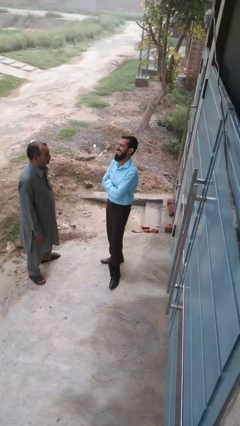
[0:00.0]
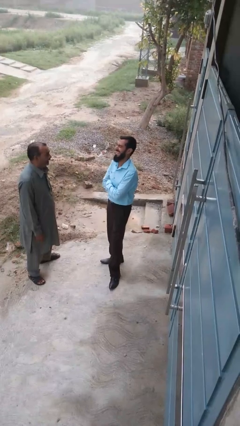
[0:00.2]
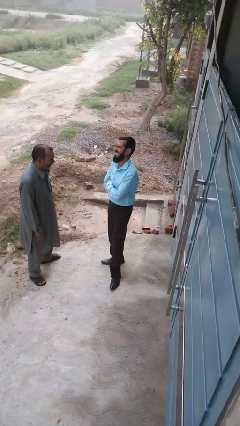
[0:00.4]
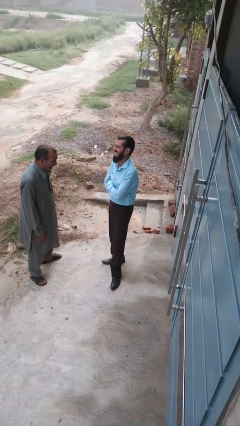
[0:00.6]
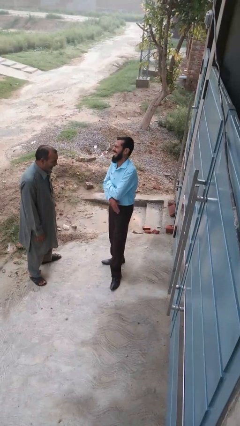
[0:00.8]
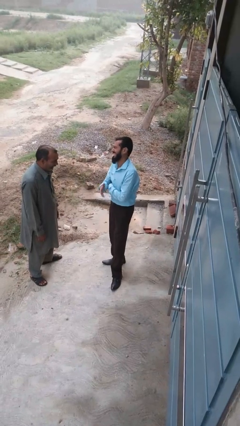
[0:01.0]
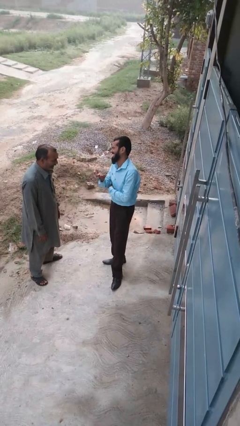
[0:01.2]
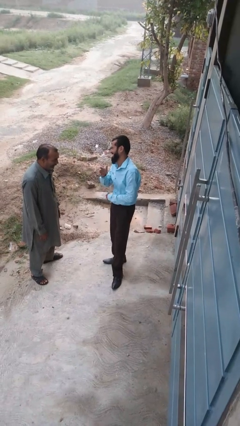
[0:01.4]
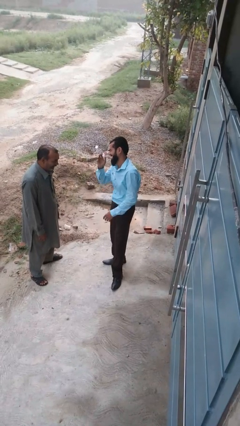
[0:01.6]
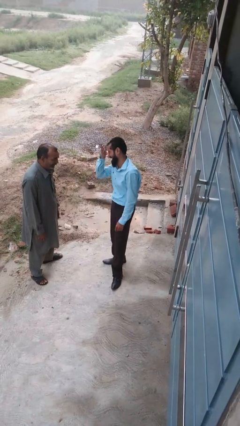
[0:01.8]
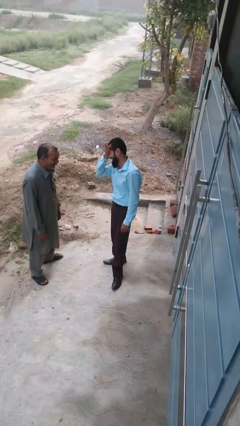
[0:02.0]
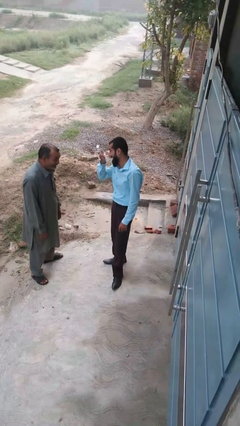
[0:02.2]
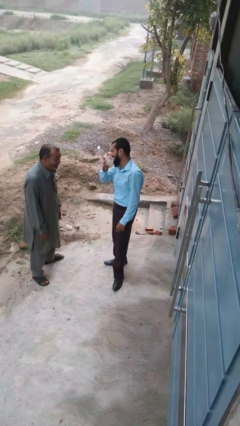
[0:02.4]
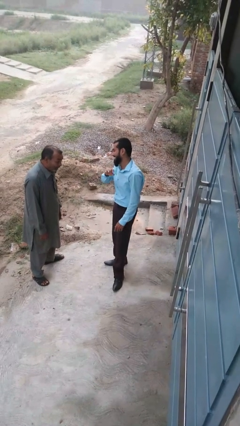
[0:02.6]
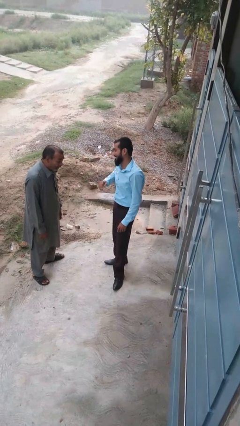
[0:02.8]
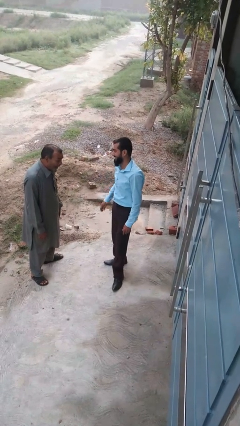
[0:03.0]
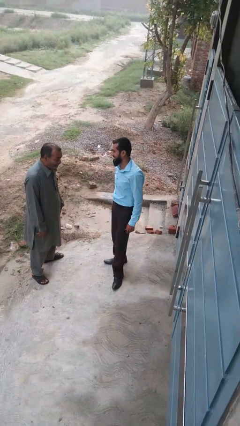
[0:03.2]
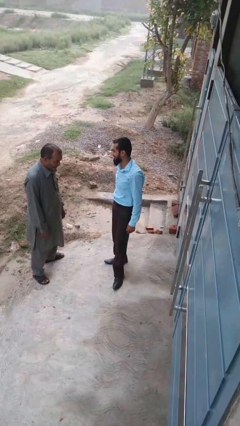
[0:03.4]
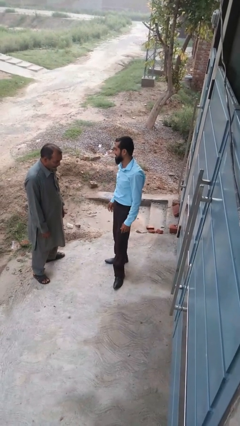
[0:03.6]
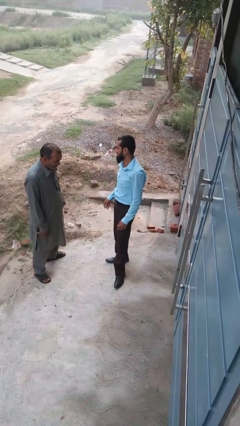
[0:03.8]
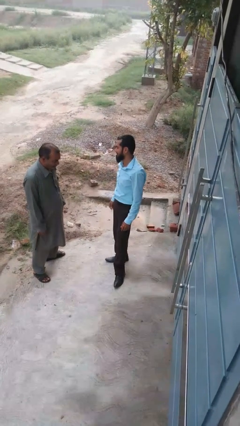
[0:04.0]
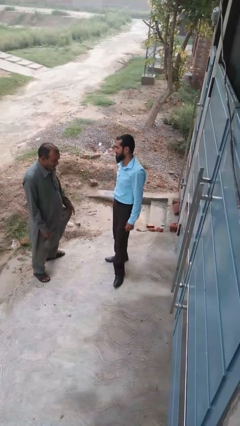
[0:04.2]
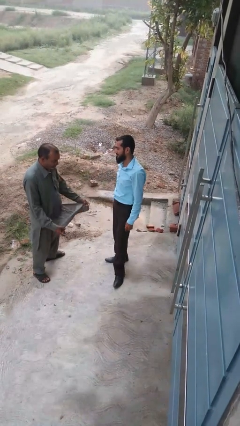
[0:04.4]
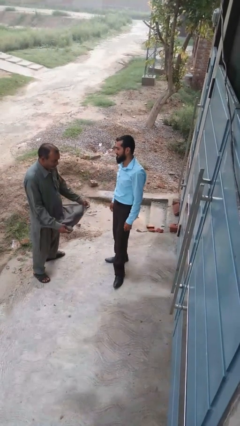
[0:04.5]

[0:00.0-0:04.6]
person laughs with person

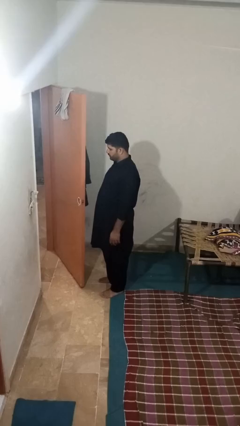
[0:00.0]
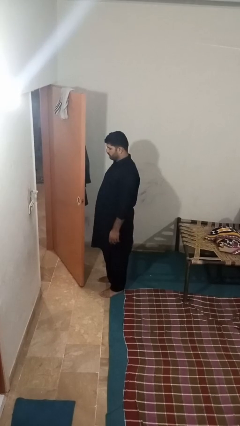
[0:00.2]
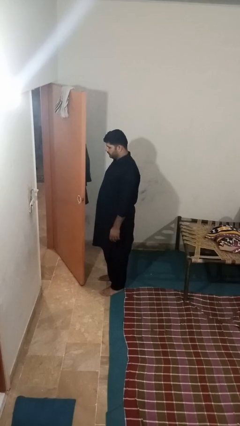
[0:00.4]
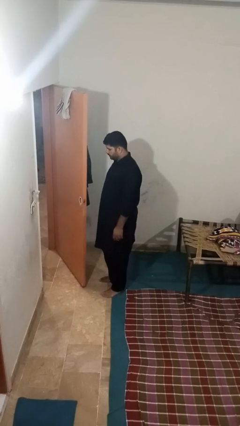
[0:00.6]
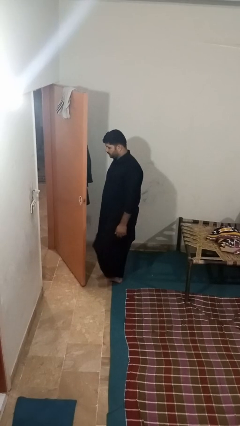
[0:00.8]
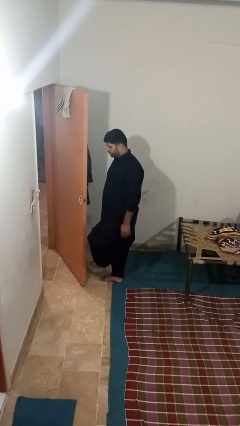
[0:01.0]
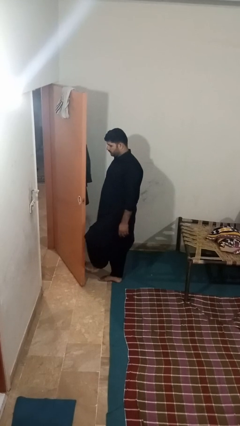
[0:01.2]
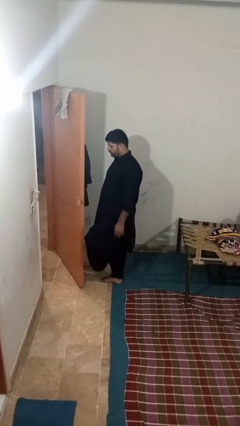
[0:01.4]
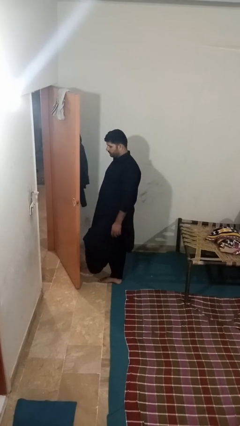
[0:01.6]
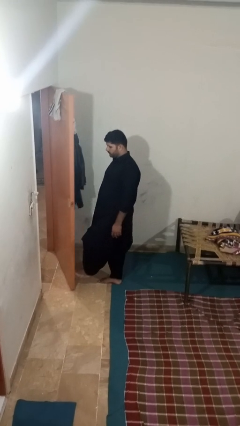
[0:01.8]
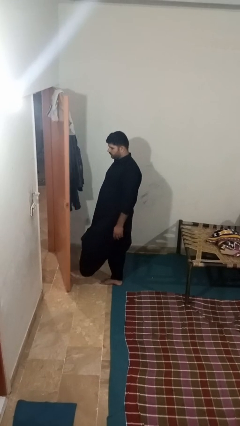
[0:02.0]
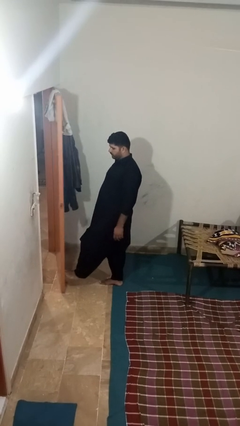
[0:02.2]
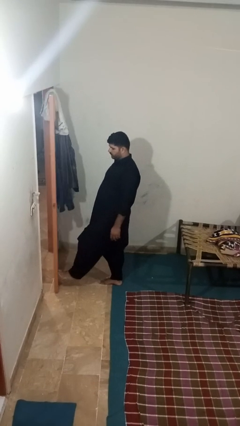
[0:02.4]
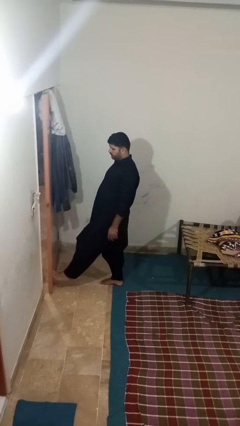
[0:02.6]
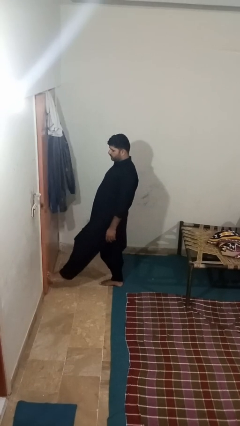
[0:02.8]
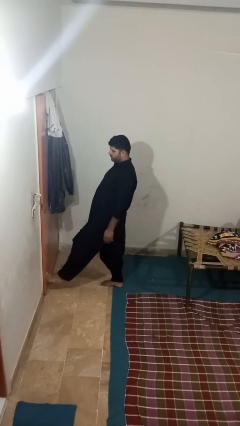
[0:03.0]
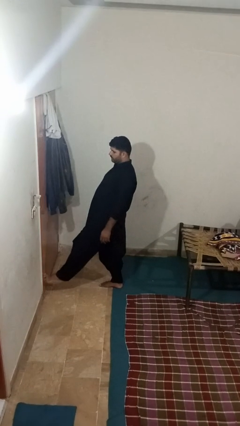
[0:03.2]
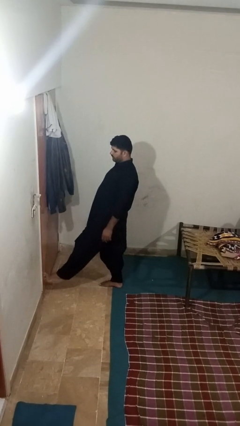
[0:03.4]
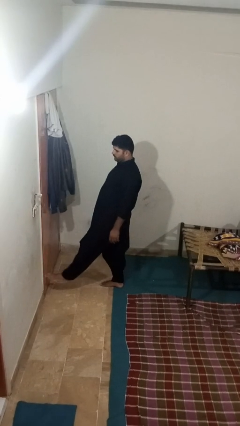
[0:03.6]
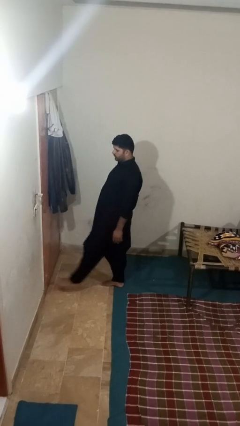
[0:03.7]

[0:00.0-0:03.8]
person closes door with foot

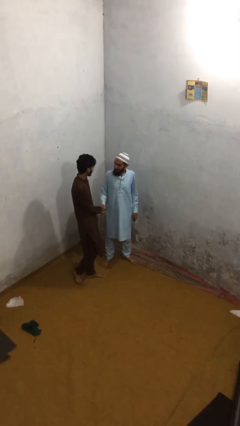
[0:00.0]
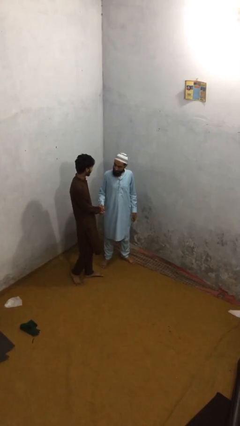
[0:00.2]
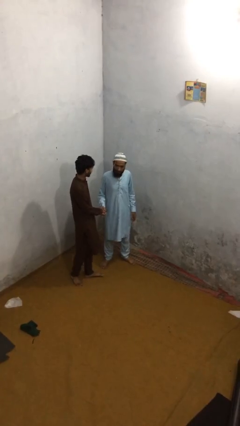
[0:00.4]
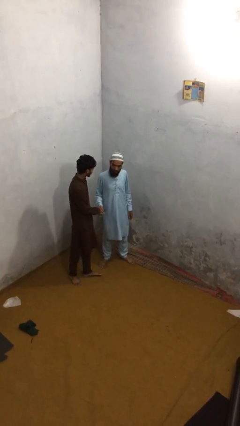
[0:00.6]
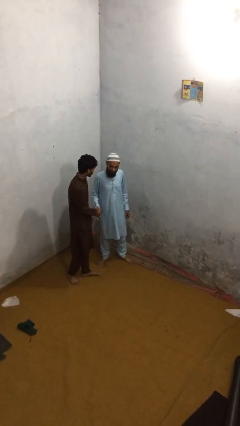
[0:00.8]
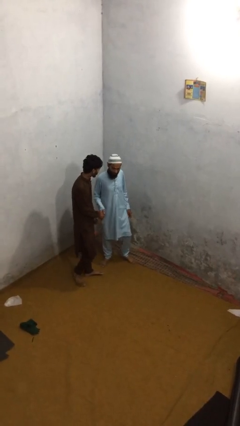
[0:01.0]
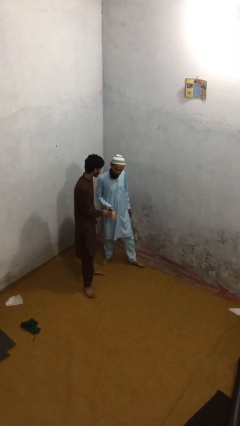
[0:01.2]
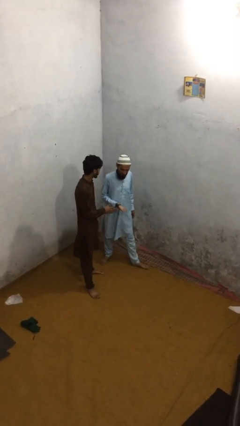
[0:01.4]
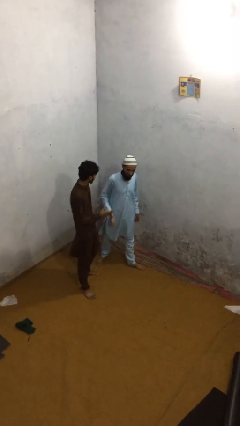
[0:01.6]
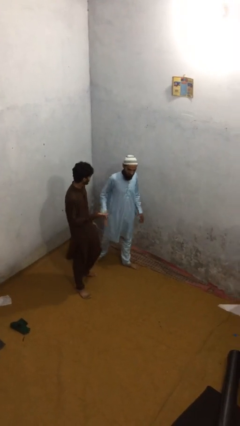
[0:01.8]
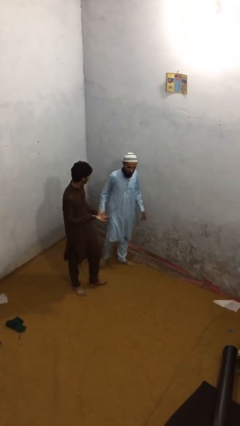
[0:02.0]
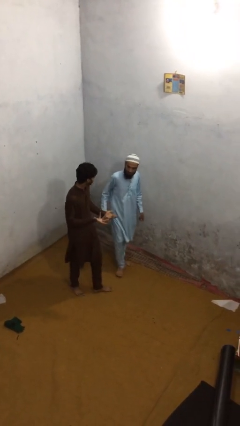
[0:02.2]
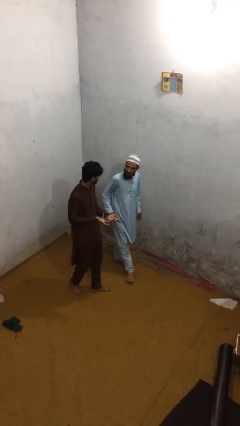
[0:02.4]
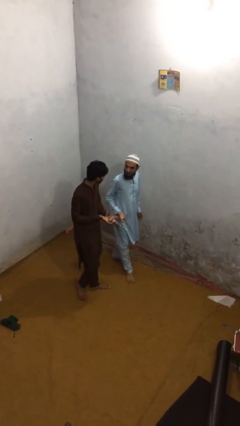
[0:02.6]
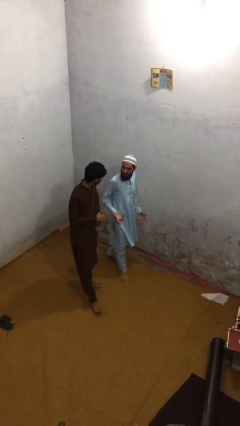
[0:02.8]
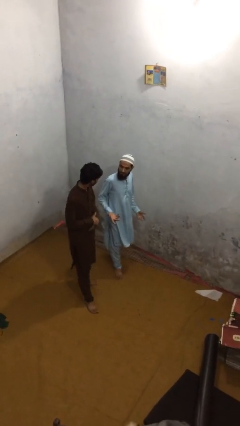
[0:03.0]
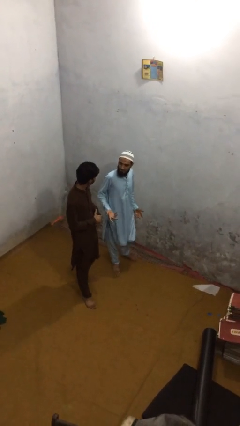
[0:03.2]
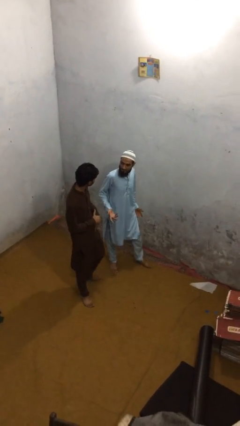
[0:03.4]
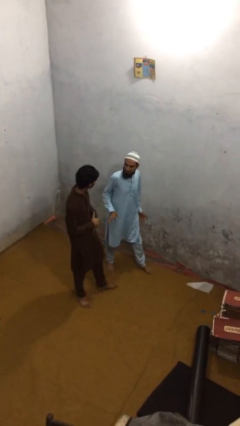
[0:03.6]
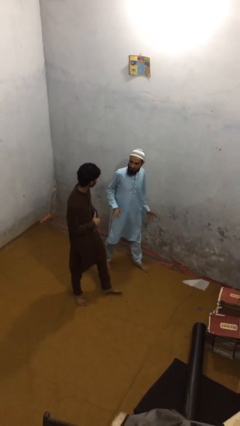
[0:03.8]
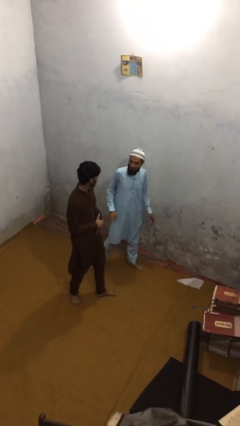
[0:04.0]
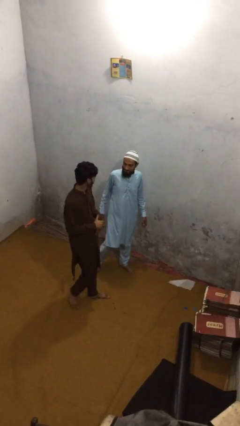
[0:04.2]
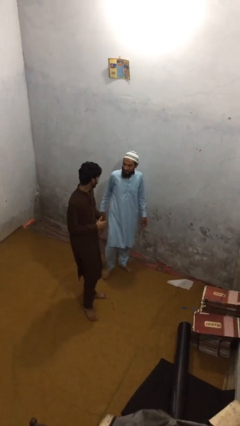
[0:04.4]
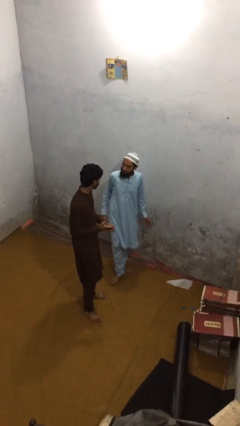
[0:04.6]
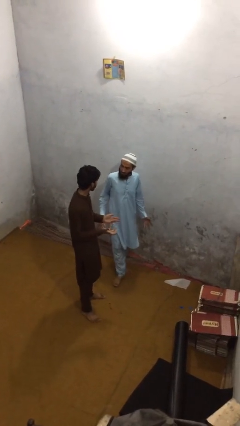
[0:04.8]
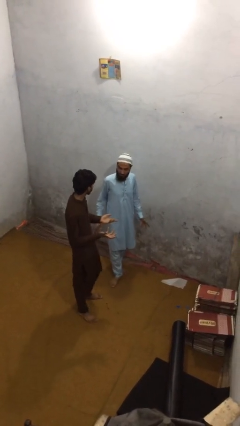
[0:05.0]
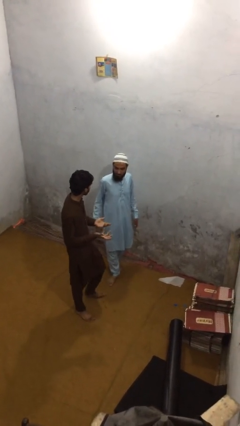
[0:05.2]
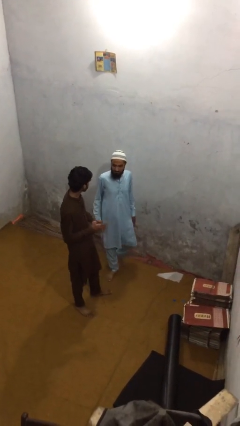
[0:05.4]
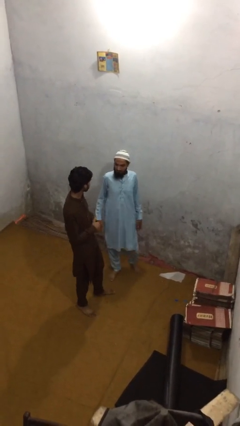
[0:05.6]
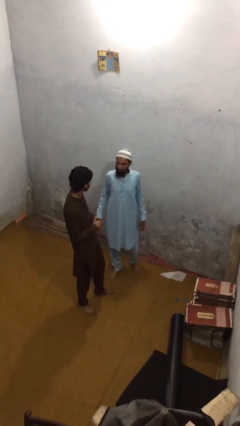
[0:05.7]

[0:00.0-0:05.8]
person talks to person

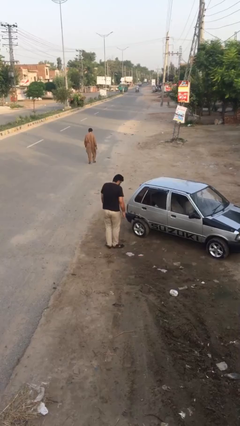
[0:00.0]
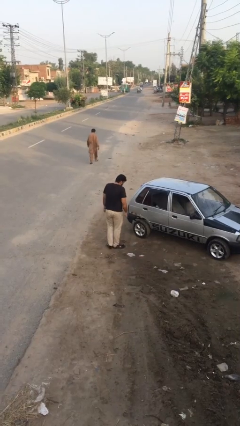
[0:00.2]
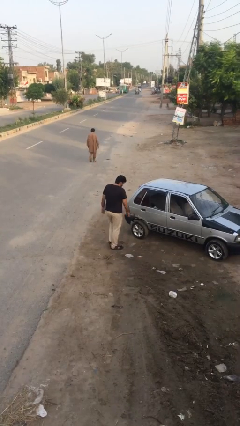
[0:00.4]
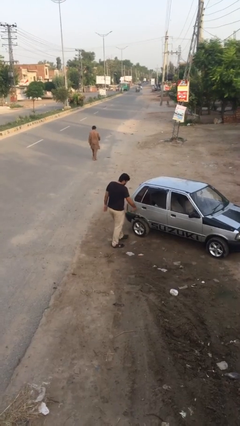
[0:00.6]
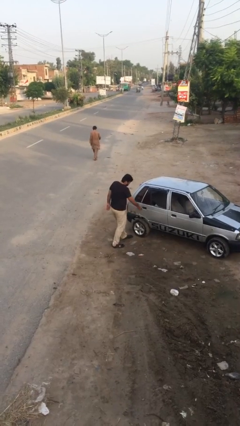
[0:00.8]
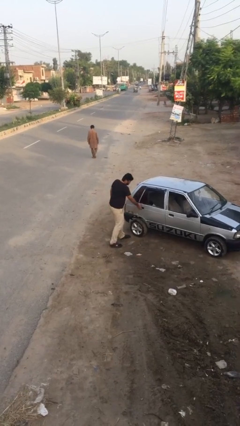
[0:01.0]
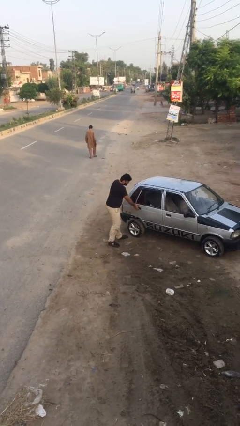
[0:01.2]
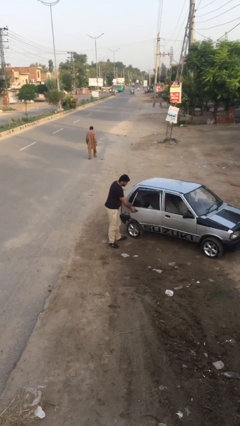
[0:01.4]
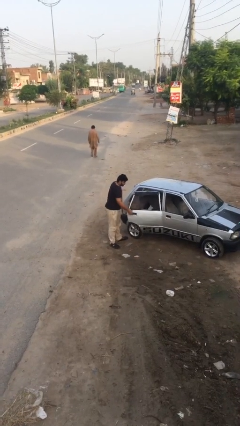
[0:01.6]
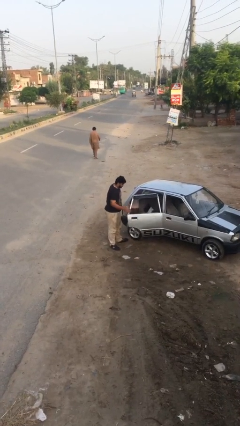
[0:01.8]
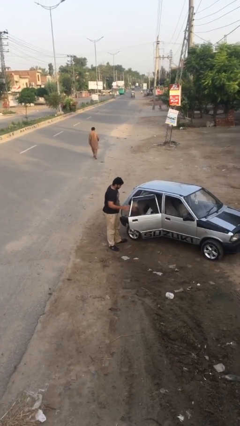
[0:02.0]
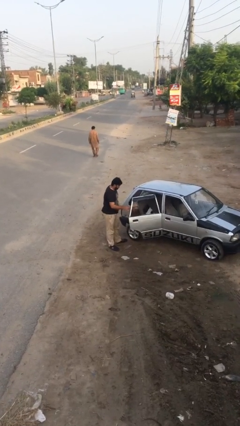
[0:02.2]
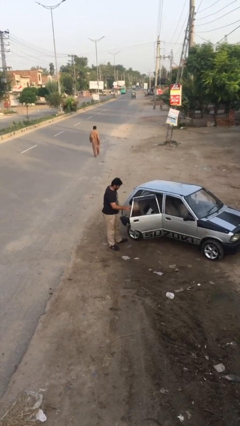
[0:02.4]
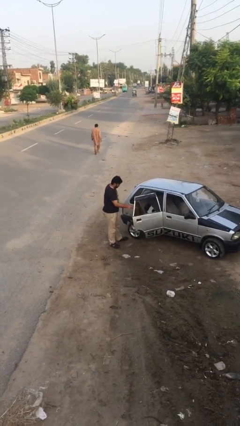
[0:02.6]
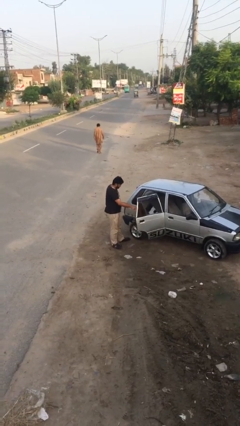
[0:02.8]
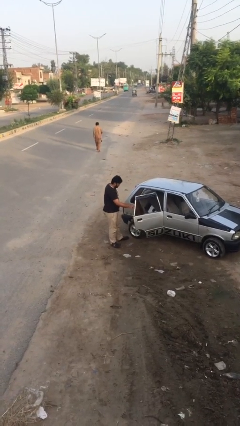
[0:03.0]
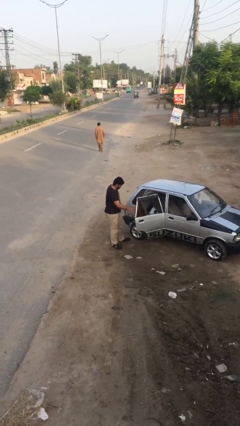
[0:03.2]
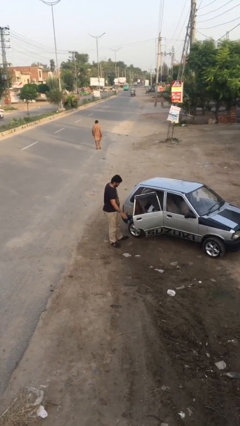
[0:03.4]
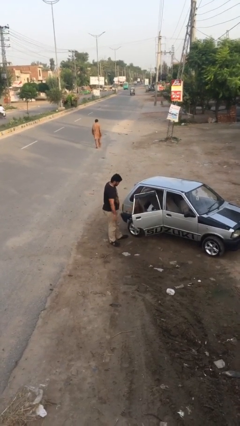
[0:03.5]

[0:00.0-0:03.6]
person opens car door

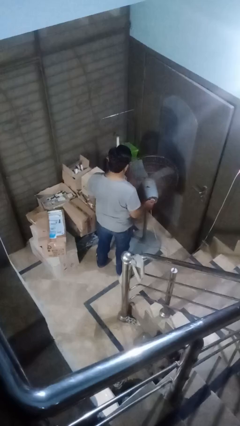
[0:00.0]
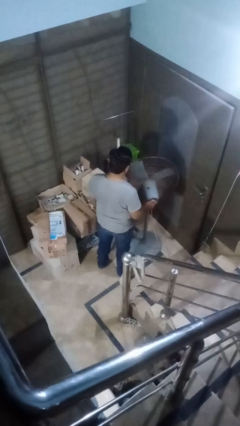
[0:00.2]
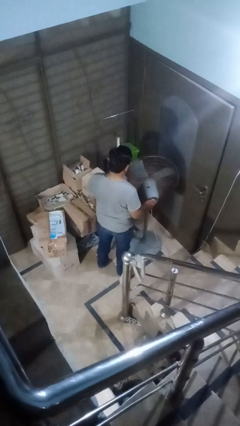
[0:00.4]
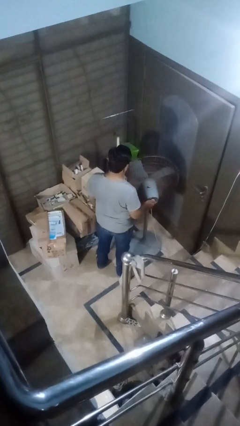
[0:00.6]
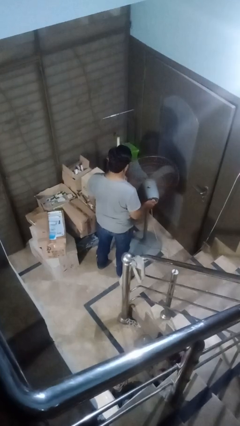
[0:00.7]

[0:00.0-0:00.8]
person turns on fan
